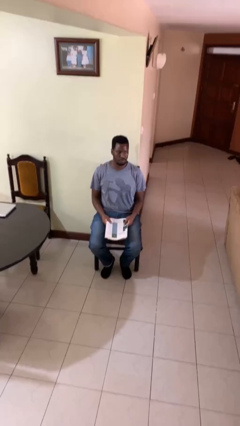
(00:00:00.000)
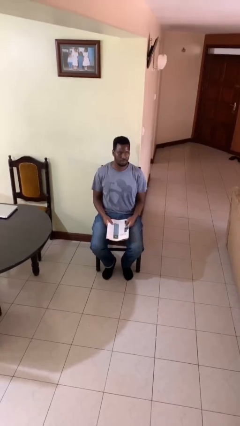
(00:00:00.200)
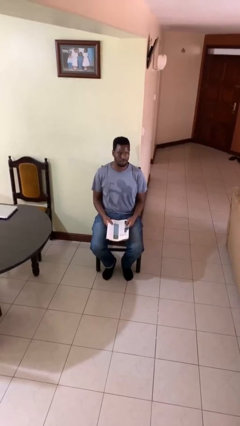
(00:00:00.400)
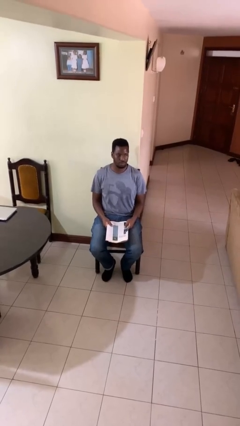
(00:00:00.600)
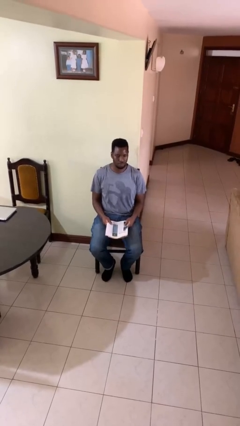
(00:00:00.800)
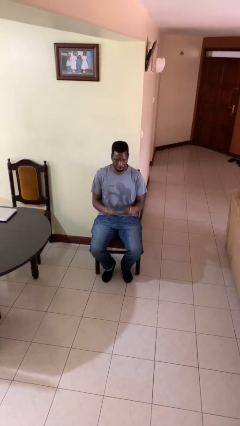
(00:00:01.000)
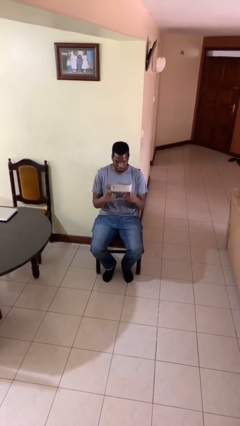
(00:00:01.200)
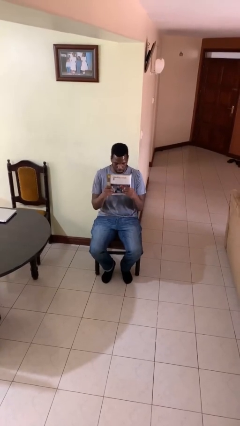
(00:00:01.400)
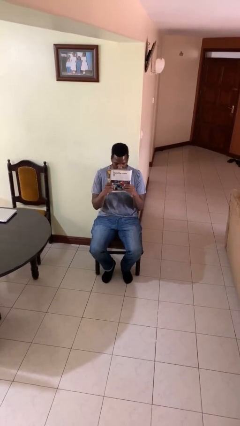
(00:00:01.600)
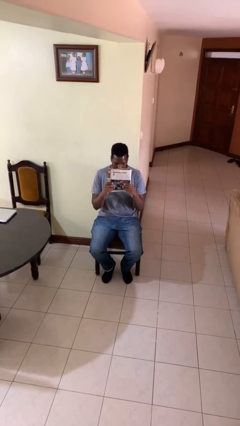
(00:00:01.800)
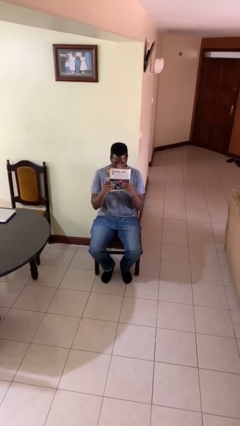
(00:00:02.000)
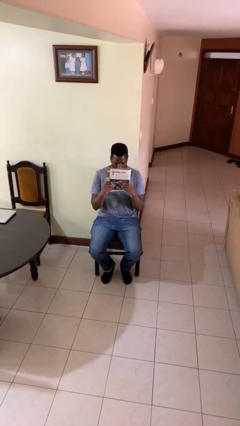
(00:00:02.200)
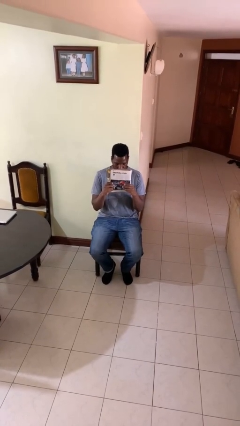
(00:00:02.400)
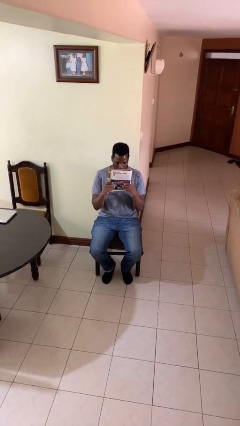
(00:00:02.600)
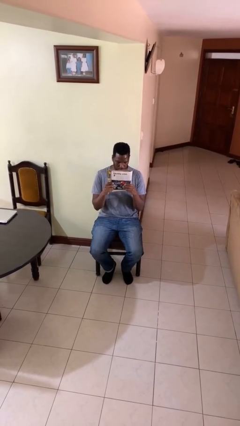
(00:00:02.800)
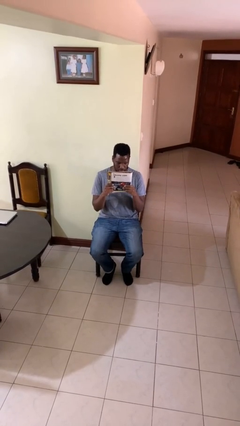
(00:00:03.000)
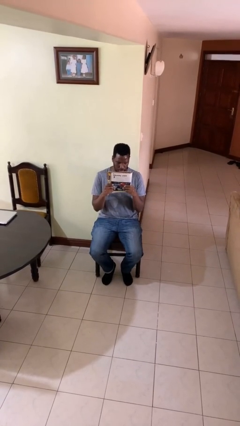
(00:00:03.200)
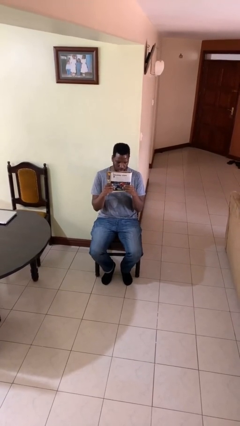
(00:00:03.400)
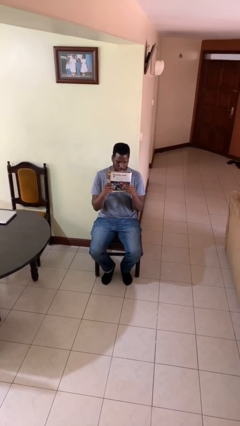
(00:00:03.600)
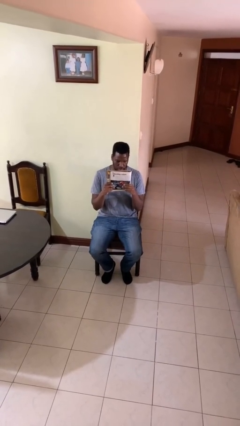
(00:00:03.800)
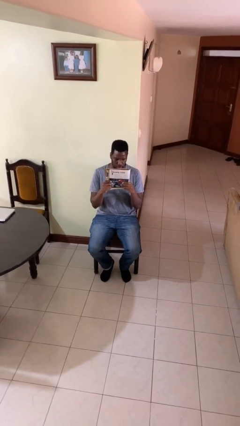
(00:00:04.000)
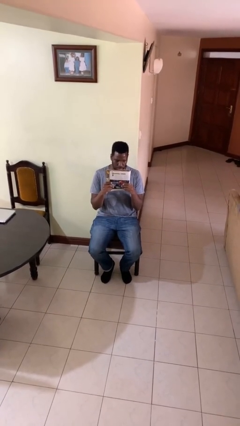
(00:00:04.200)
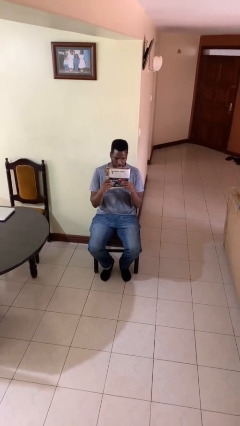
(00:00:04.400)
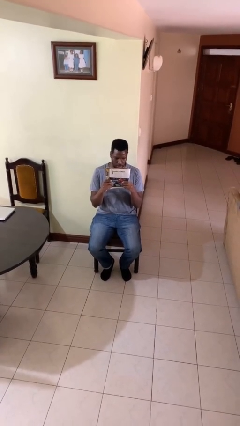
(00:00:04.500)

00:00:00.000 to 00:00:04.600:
person reads document

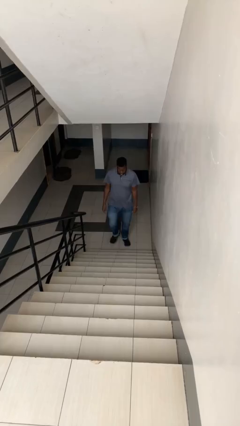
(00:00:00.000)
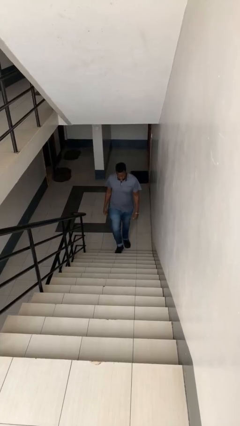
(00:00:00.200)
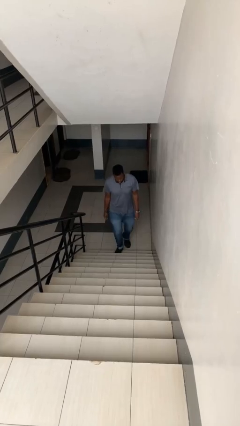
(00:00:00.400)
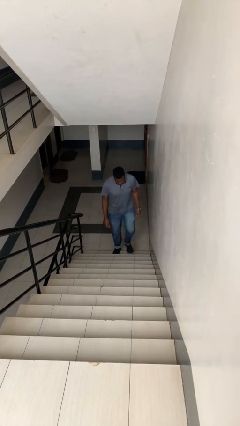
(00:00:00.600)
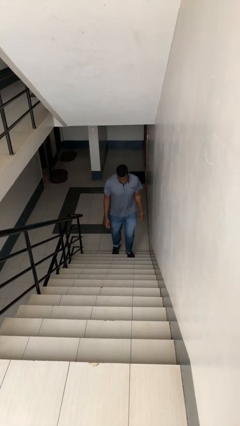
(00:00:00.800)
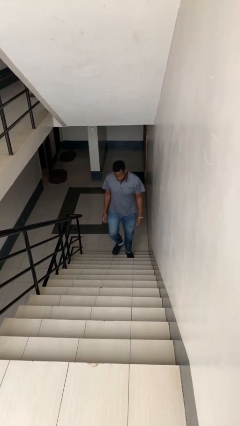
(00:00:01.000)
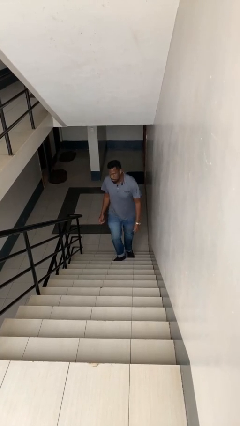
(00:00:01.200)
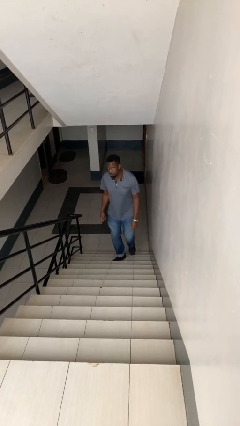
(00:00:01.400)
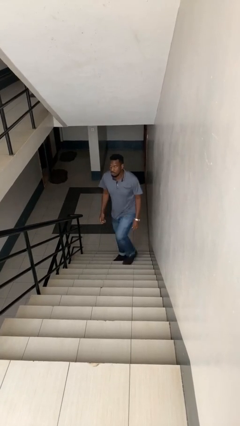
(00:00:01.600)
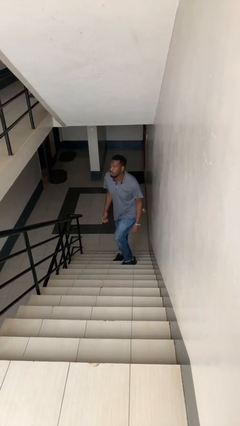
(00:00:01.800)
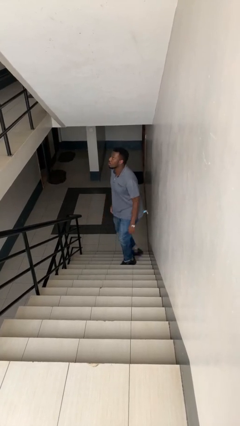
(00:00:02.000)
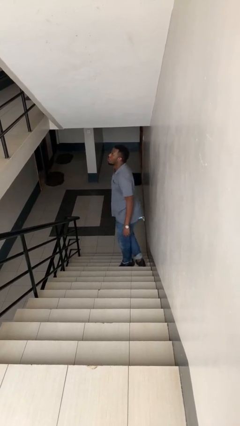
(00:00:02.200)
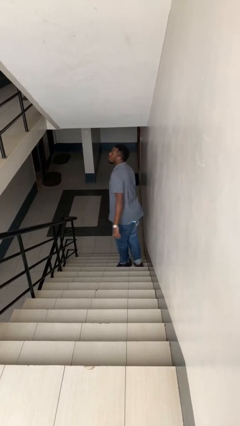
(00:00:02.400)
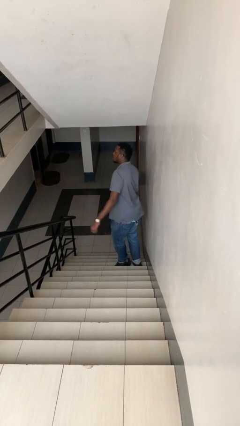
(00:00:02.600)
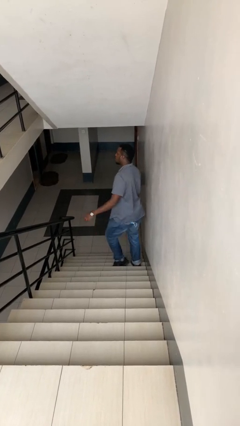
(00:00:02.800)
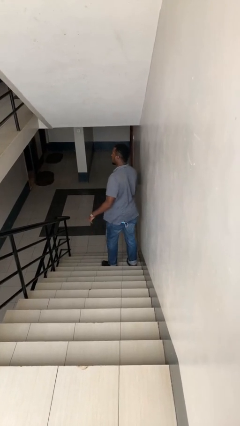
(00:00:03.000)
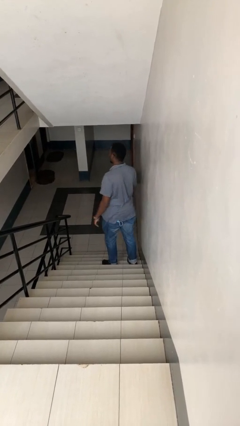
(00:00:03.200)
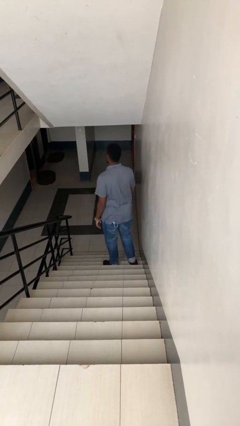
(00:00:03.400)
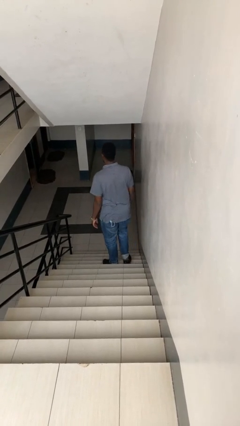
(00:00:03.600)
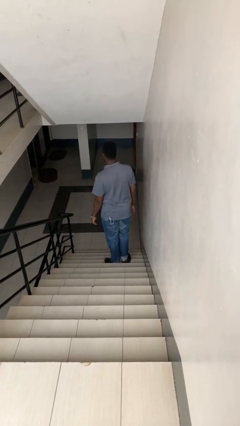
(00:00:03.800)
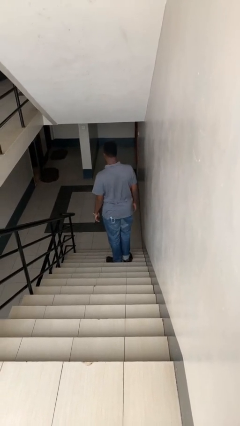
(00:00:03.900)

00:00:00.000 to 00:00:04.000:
person climbs up stairs

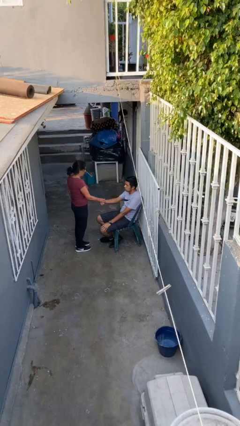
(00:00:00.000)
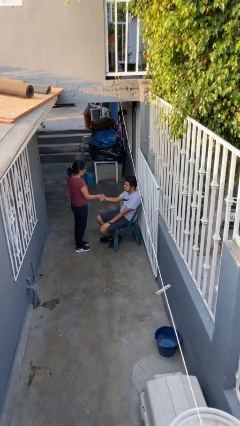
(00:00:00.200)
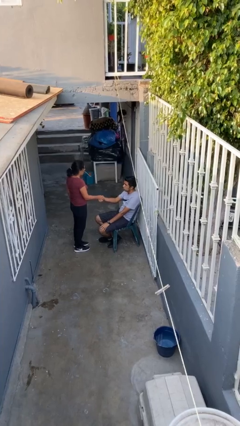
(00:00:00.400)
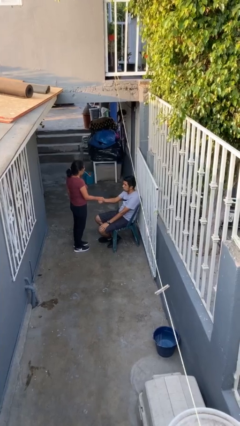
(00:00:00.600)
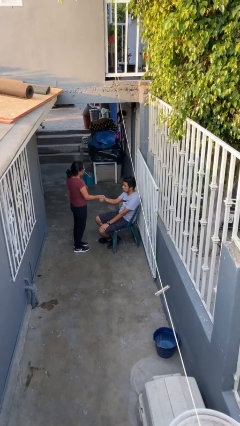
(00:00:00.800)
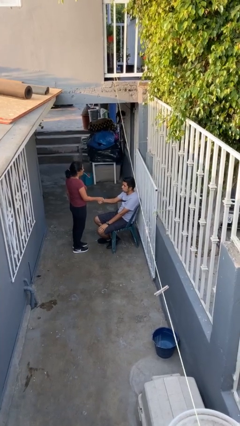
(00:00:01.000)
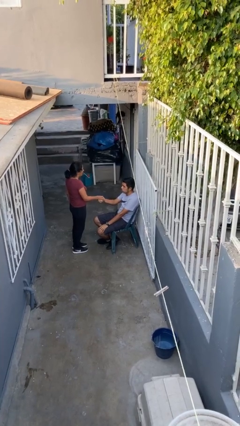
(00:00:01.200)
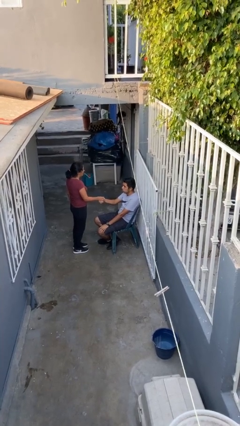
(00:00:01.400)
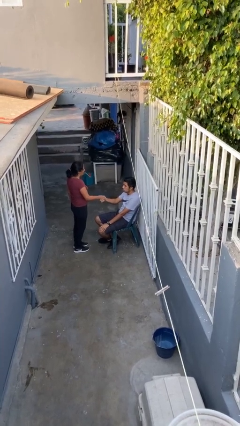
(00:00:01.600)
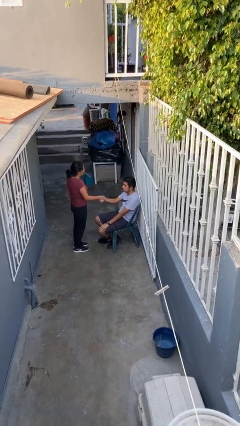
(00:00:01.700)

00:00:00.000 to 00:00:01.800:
person shakes hand

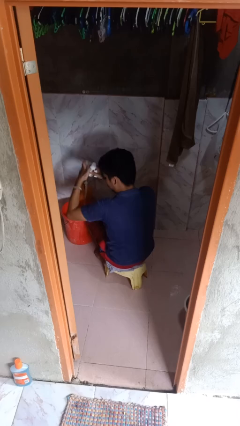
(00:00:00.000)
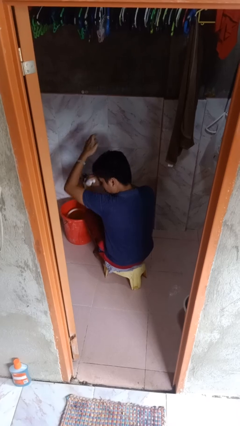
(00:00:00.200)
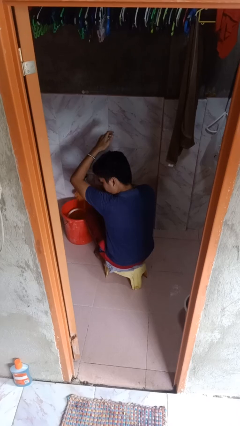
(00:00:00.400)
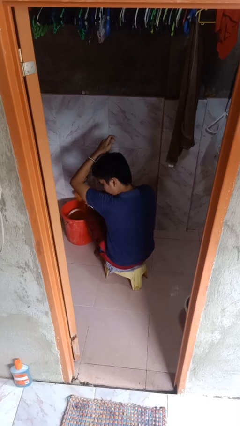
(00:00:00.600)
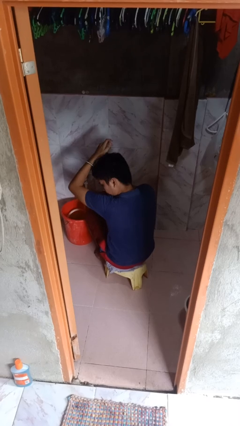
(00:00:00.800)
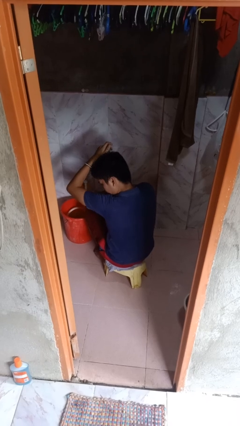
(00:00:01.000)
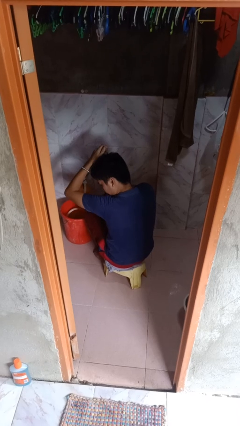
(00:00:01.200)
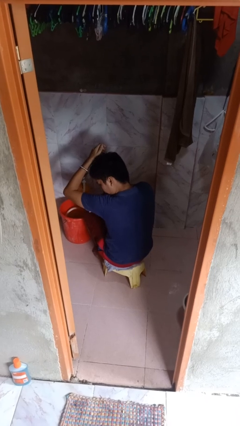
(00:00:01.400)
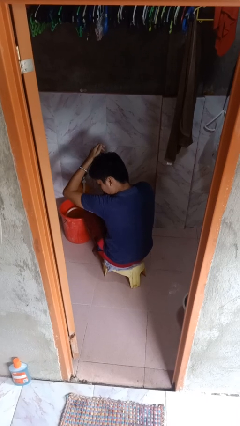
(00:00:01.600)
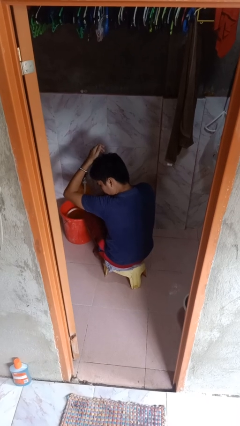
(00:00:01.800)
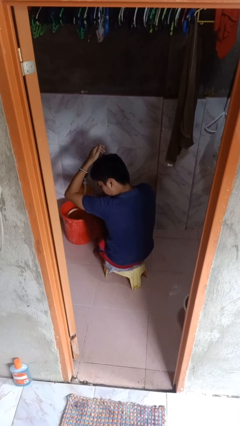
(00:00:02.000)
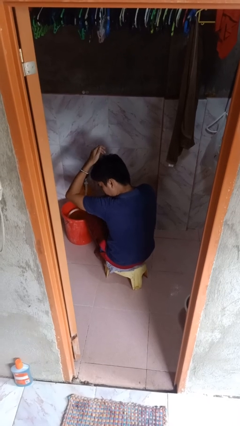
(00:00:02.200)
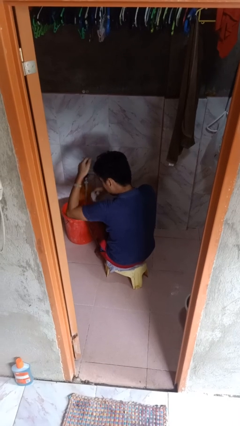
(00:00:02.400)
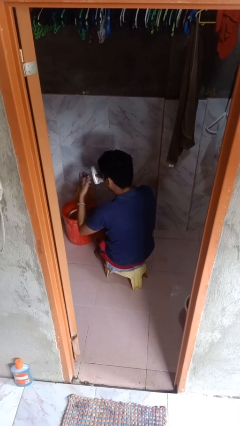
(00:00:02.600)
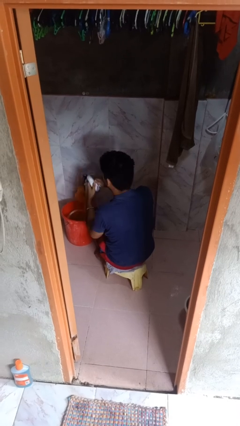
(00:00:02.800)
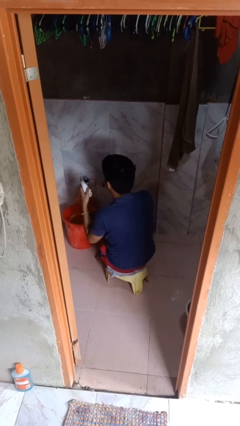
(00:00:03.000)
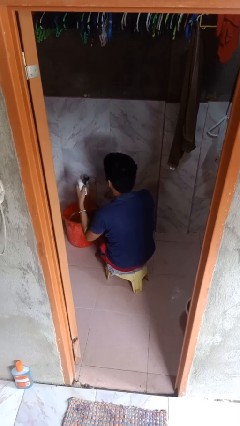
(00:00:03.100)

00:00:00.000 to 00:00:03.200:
person applies deodorant

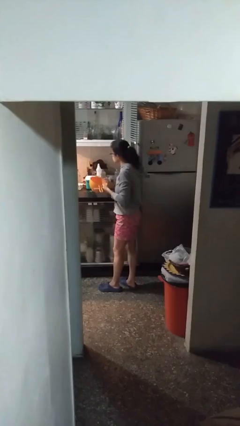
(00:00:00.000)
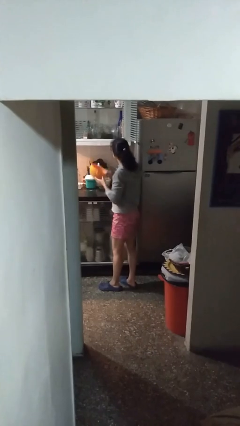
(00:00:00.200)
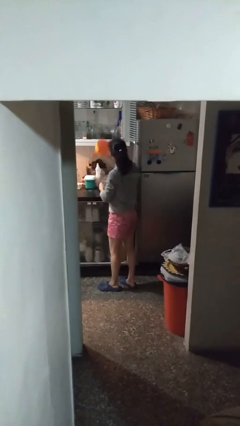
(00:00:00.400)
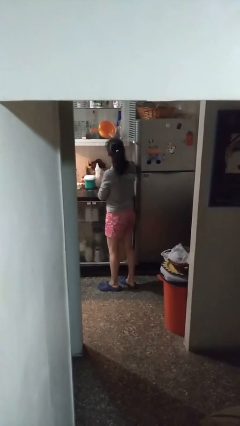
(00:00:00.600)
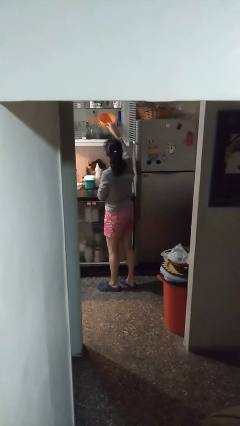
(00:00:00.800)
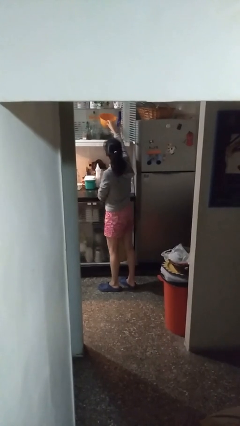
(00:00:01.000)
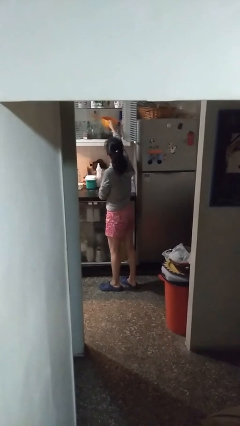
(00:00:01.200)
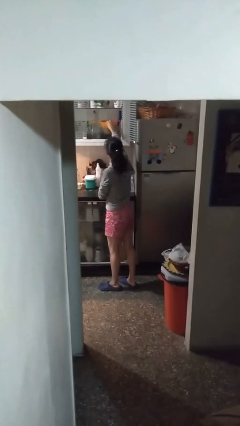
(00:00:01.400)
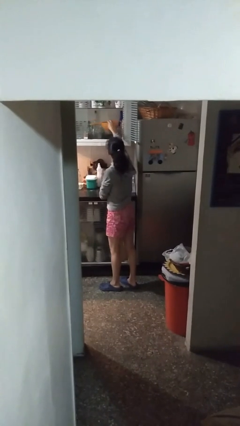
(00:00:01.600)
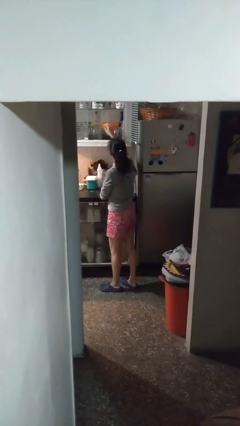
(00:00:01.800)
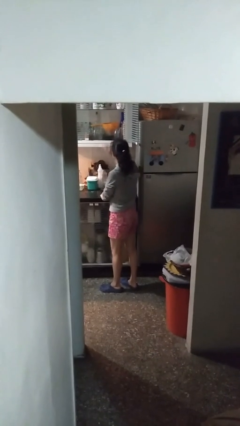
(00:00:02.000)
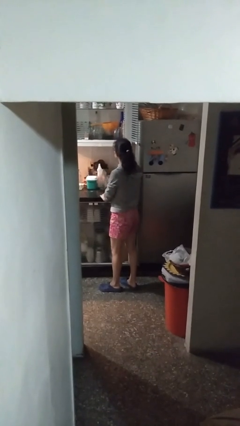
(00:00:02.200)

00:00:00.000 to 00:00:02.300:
person puts down object into cabinet

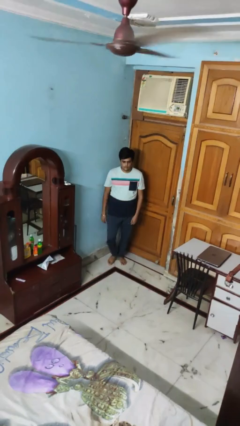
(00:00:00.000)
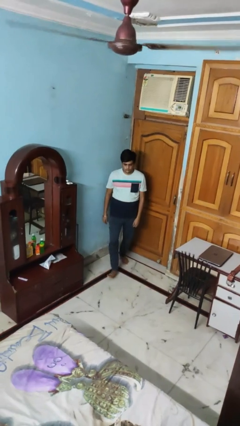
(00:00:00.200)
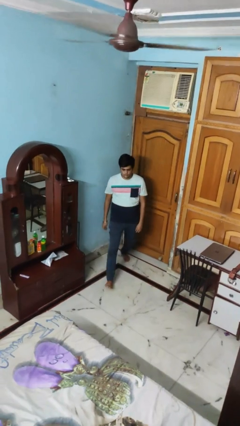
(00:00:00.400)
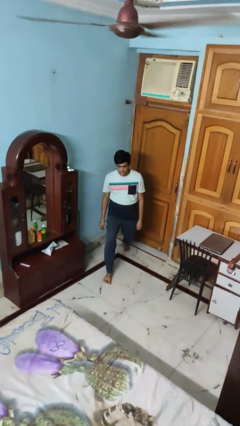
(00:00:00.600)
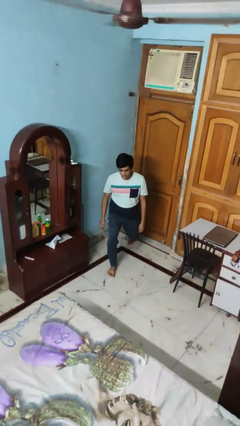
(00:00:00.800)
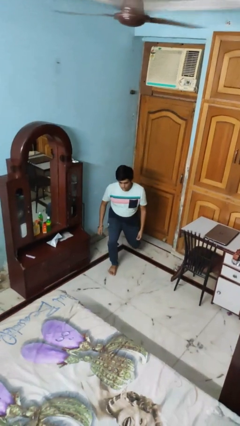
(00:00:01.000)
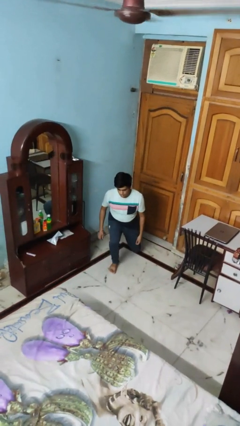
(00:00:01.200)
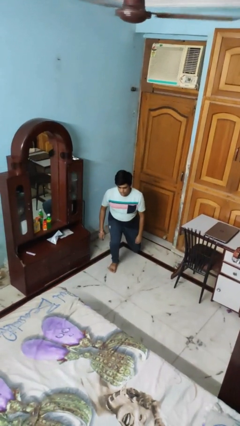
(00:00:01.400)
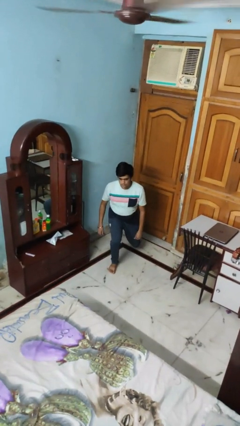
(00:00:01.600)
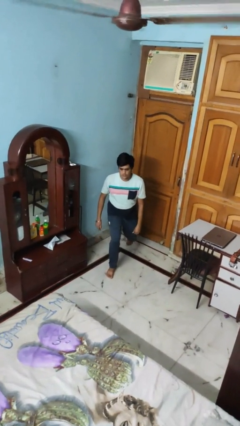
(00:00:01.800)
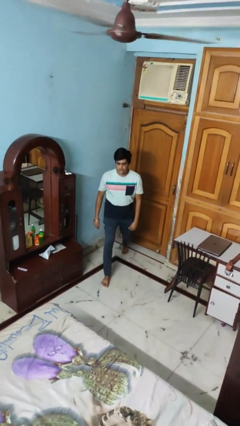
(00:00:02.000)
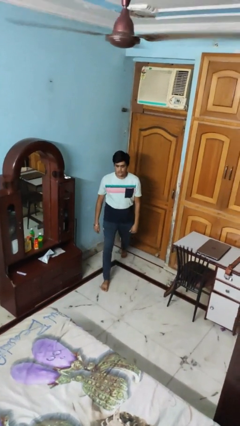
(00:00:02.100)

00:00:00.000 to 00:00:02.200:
person exercises with lunges
